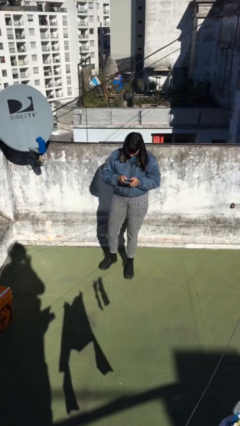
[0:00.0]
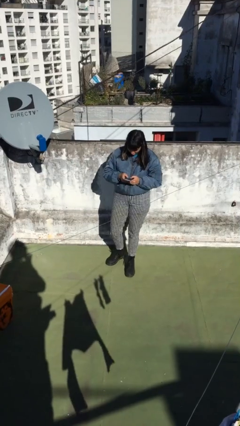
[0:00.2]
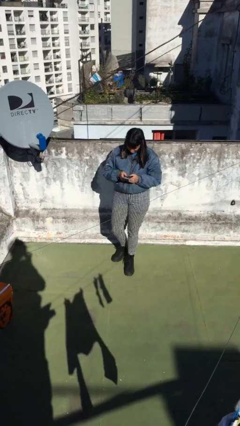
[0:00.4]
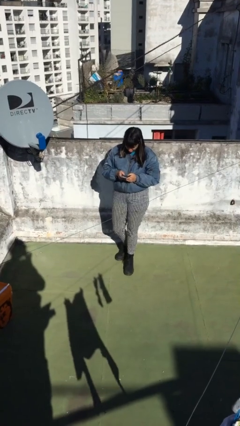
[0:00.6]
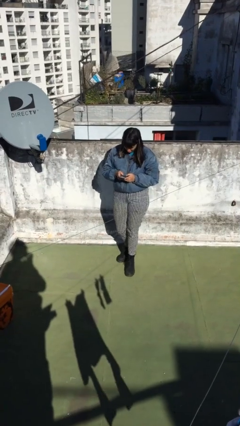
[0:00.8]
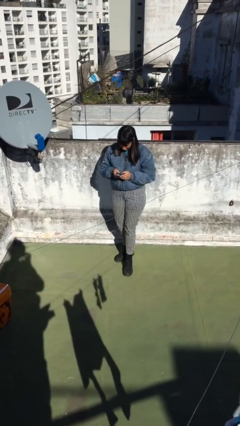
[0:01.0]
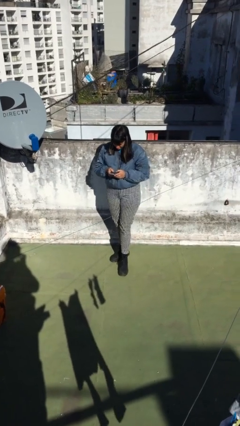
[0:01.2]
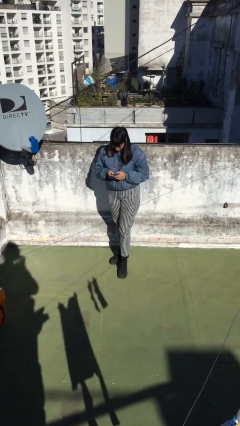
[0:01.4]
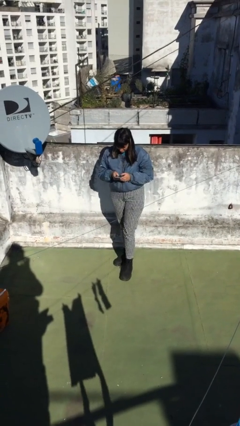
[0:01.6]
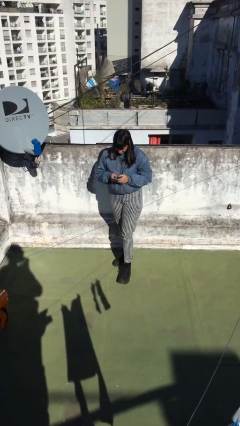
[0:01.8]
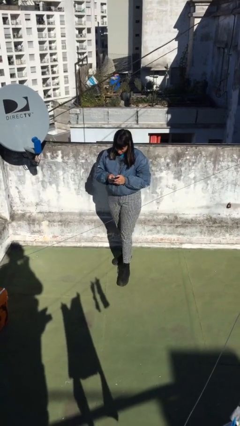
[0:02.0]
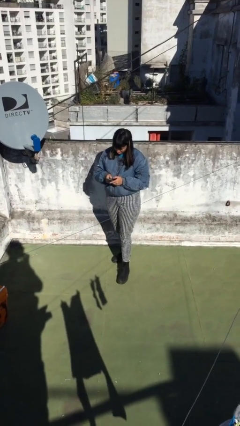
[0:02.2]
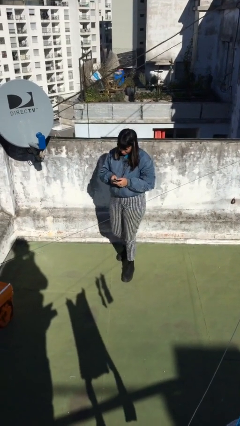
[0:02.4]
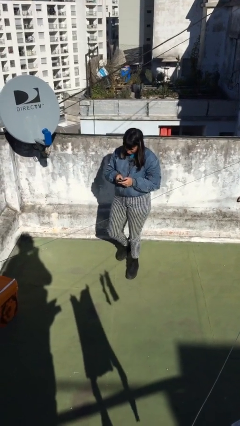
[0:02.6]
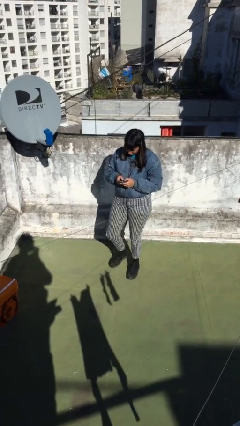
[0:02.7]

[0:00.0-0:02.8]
person texts on phone

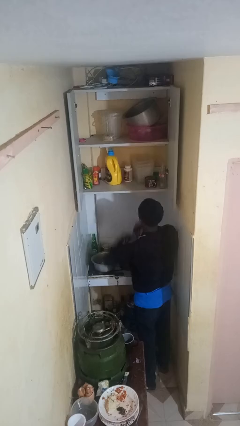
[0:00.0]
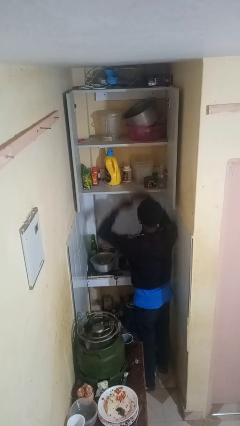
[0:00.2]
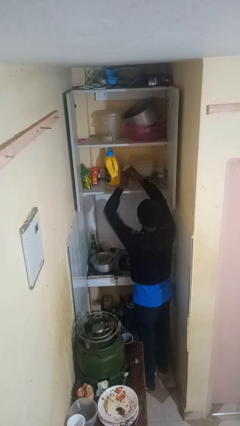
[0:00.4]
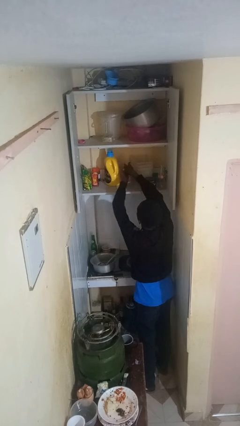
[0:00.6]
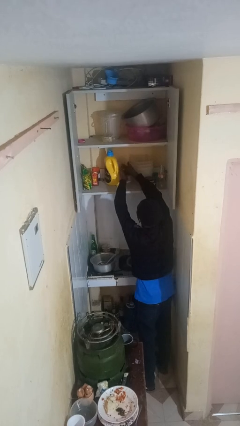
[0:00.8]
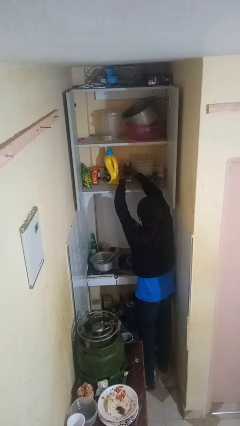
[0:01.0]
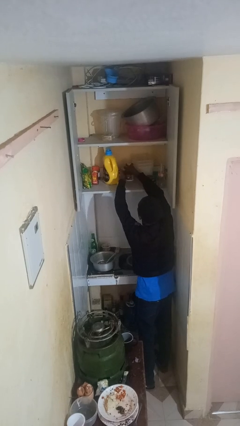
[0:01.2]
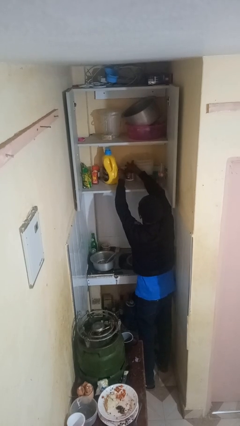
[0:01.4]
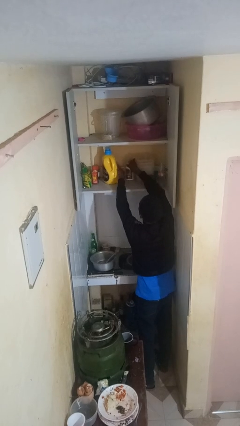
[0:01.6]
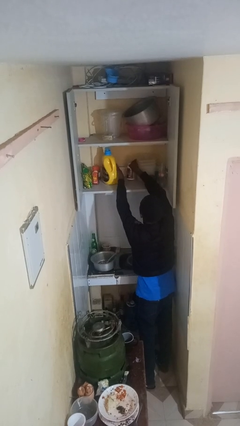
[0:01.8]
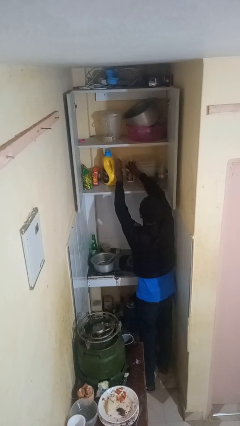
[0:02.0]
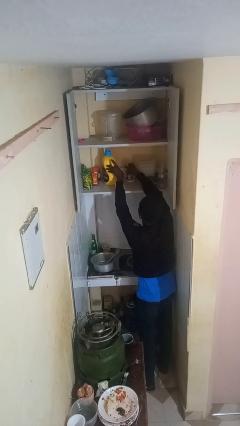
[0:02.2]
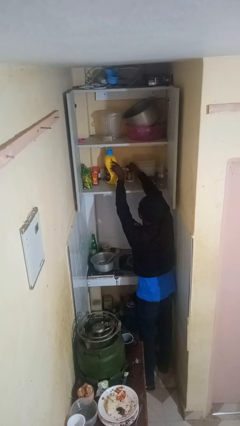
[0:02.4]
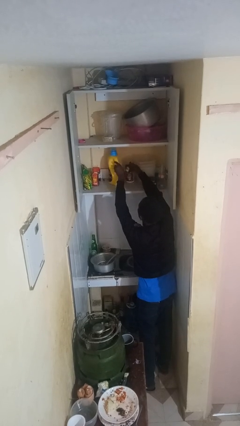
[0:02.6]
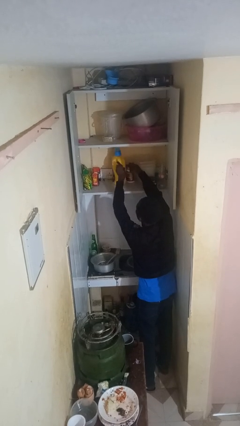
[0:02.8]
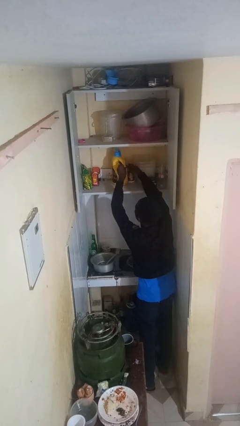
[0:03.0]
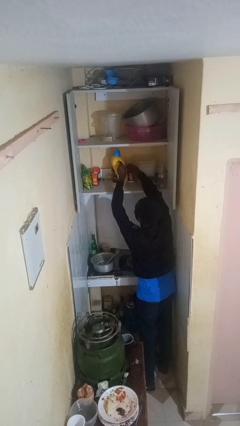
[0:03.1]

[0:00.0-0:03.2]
person searches in kitchen drawer

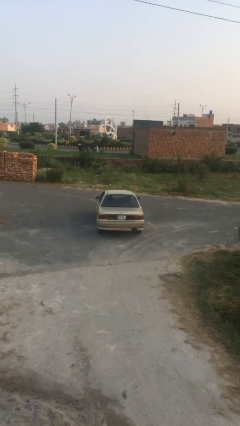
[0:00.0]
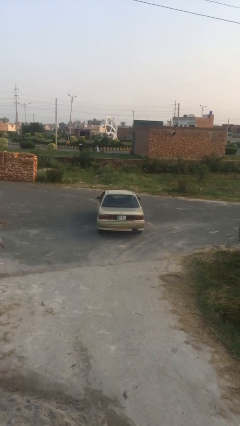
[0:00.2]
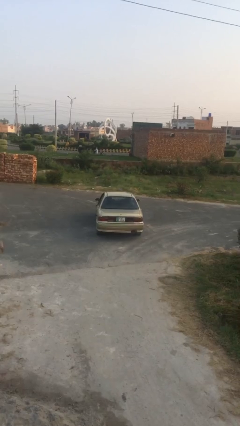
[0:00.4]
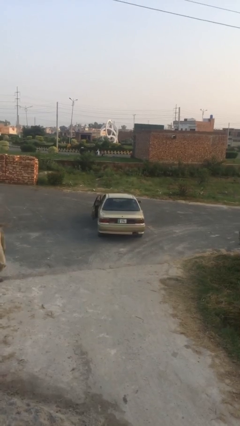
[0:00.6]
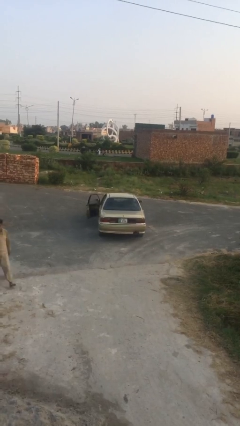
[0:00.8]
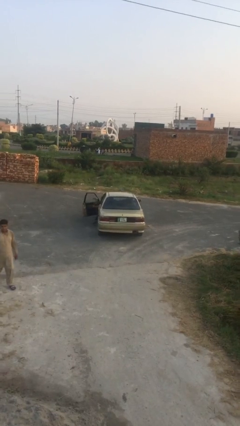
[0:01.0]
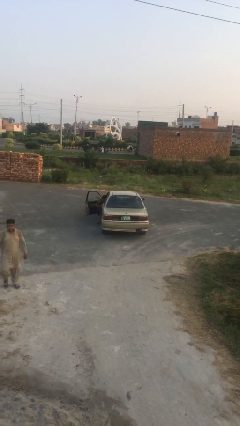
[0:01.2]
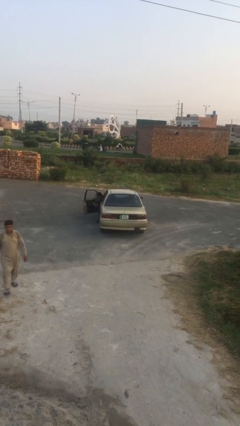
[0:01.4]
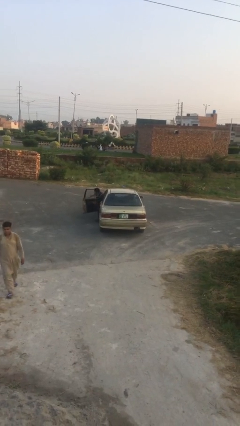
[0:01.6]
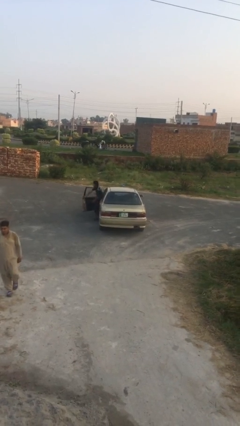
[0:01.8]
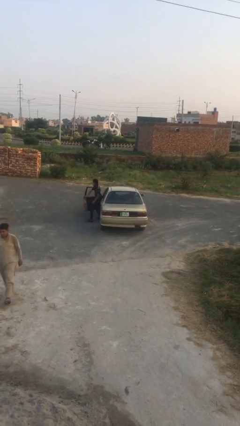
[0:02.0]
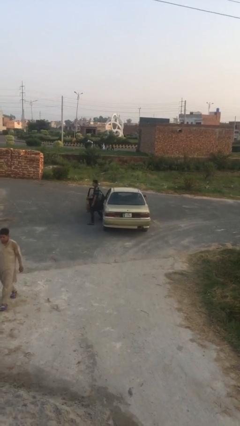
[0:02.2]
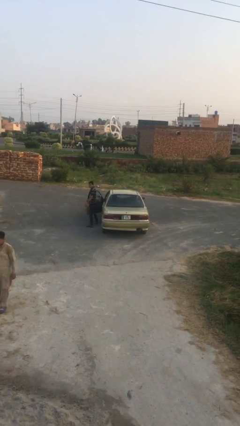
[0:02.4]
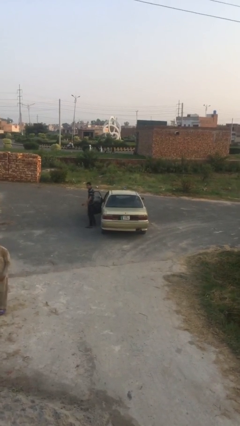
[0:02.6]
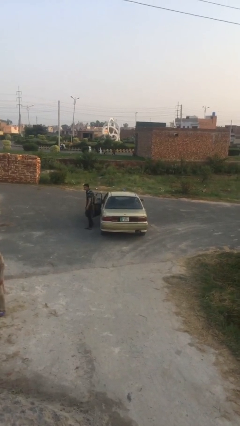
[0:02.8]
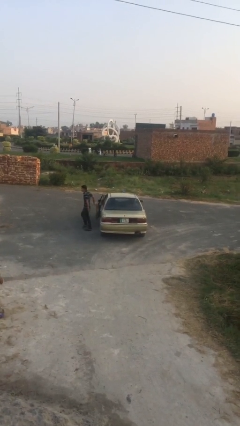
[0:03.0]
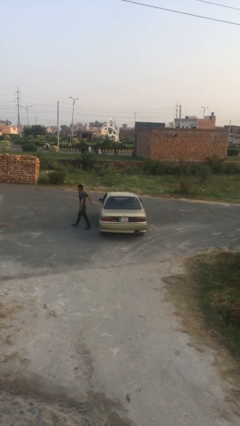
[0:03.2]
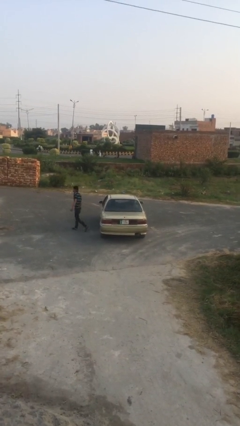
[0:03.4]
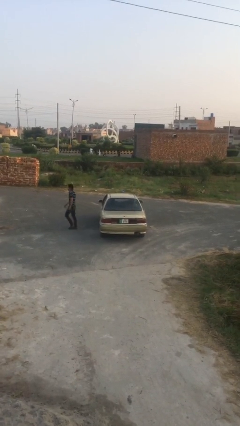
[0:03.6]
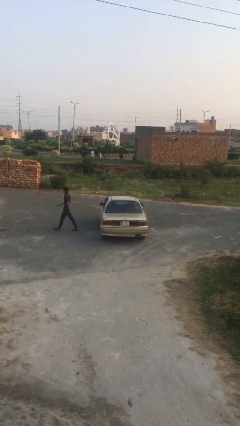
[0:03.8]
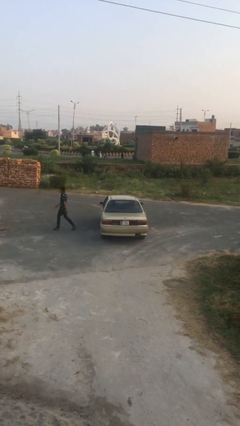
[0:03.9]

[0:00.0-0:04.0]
car drops off person

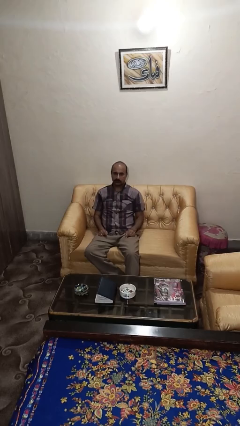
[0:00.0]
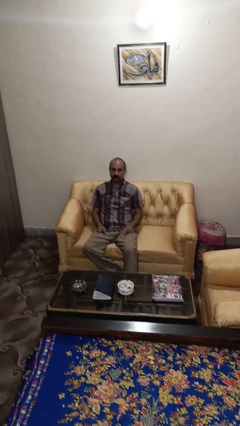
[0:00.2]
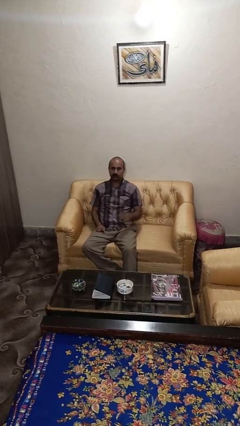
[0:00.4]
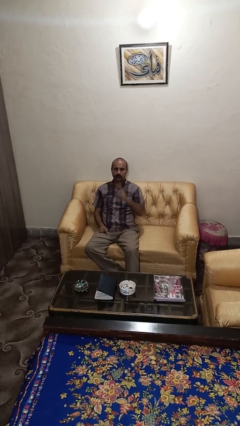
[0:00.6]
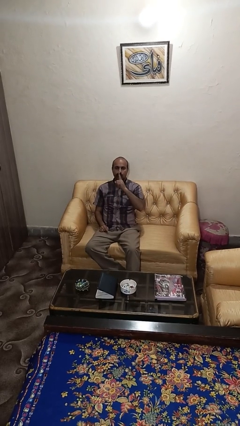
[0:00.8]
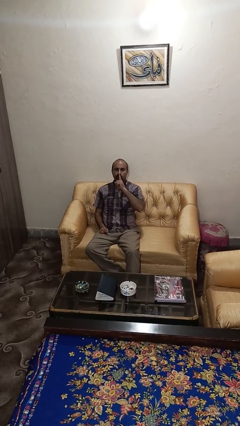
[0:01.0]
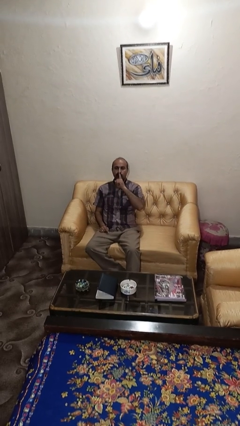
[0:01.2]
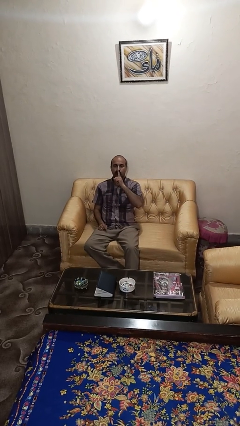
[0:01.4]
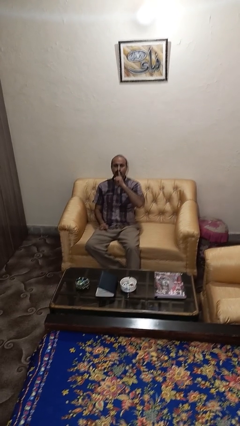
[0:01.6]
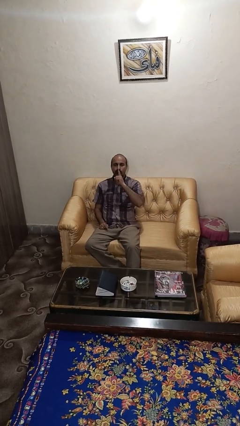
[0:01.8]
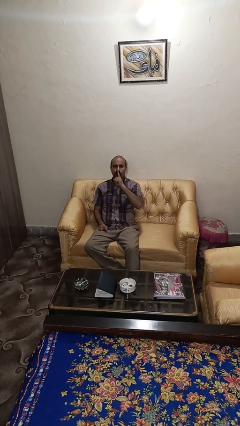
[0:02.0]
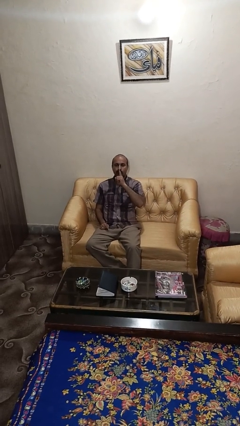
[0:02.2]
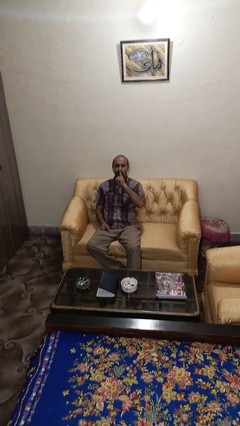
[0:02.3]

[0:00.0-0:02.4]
person gestures be quiet

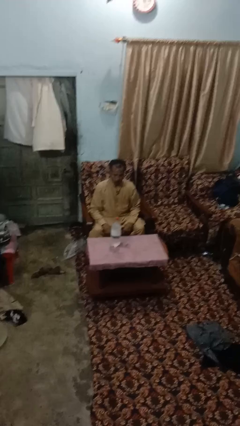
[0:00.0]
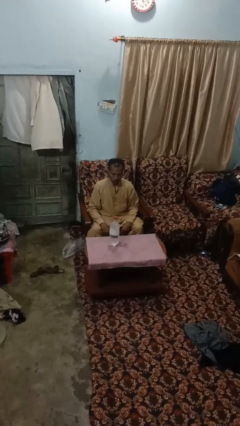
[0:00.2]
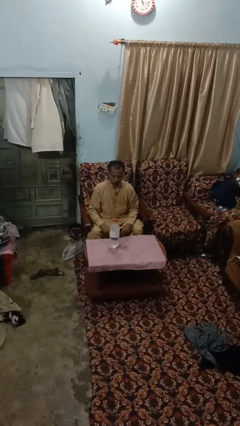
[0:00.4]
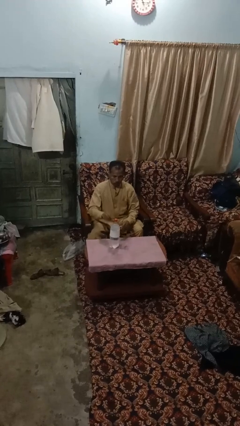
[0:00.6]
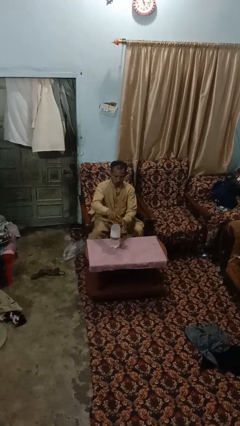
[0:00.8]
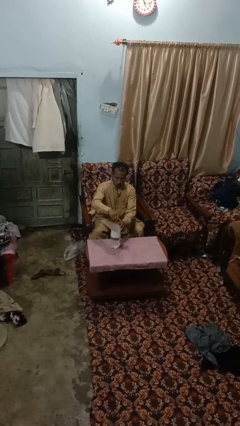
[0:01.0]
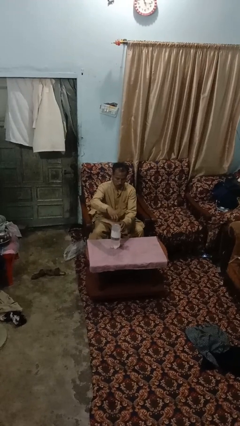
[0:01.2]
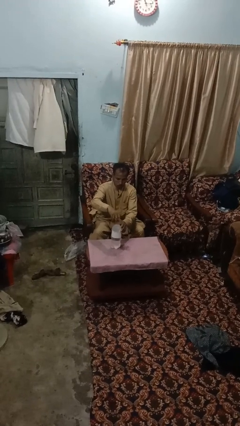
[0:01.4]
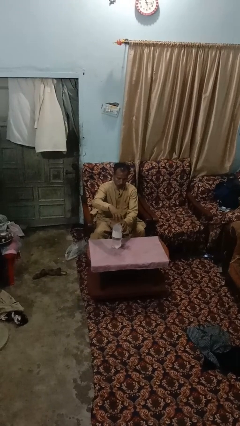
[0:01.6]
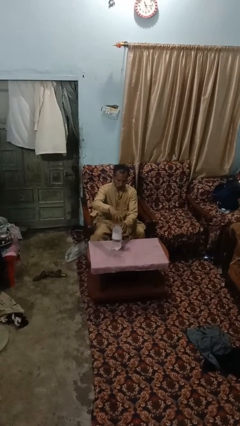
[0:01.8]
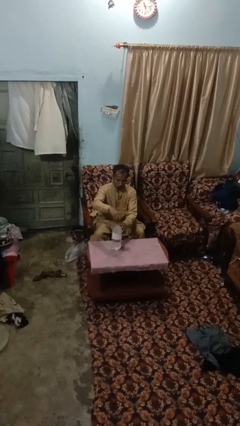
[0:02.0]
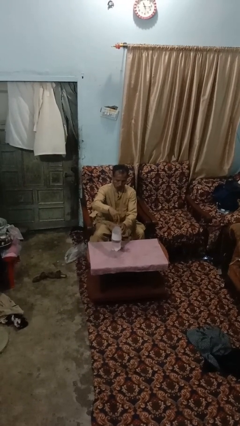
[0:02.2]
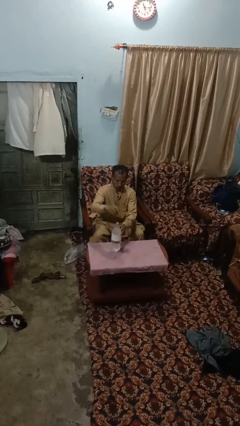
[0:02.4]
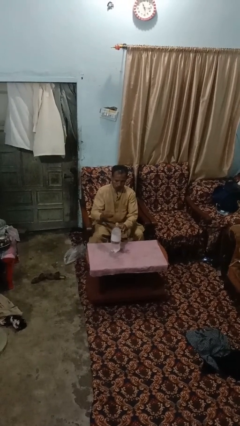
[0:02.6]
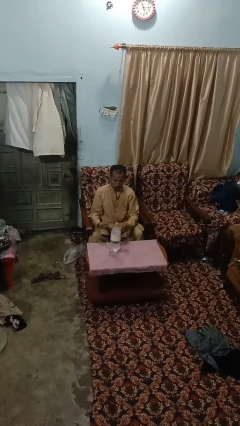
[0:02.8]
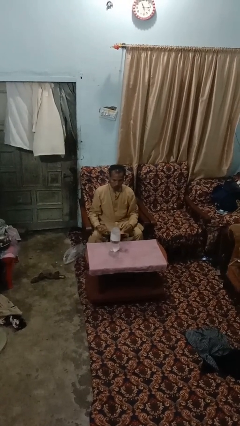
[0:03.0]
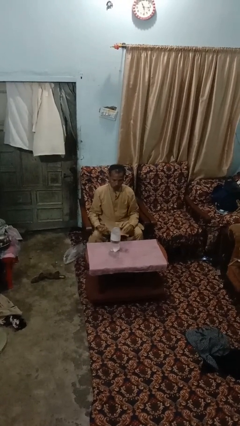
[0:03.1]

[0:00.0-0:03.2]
person unscrews lid from bottle

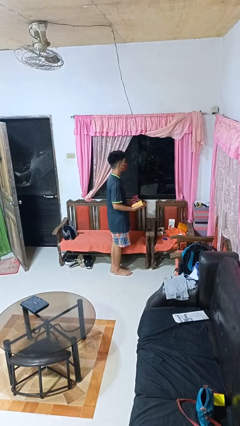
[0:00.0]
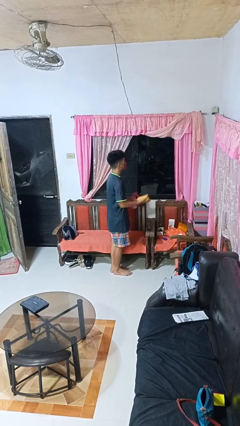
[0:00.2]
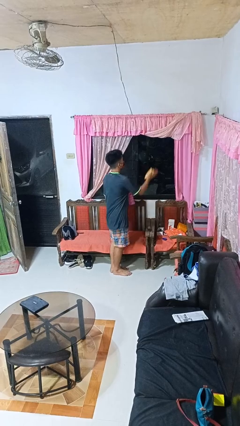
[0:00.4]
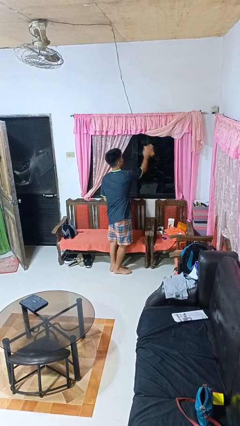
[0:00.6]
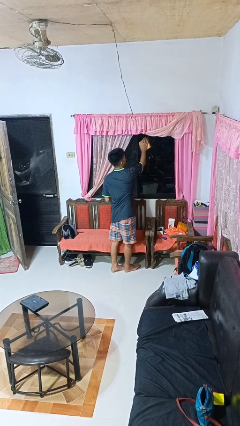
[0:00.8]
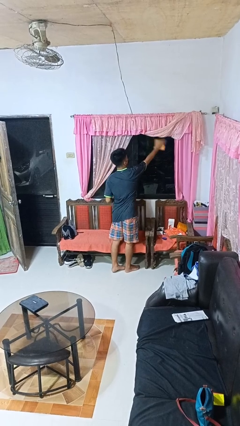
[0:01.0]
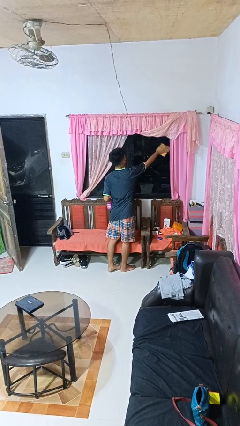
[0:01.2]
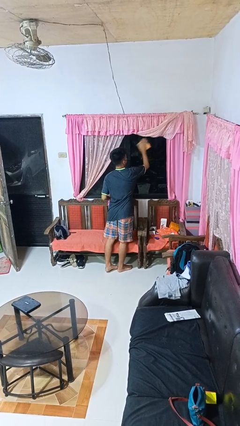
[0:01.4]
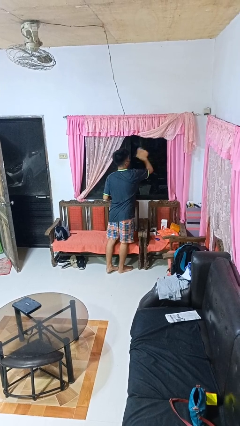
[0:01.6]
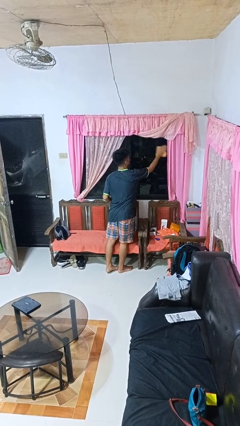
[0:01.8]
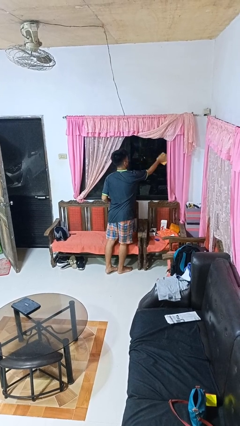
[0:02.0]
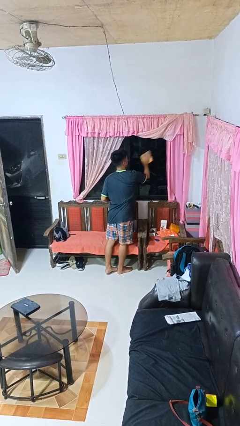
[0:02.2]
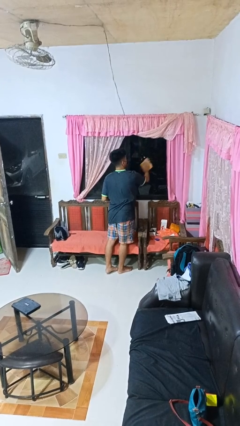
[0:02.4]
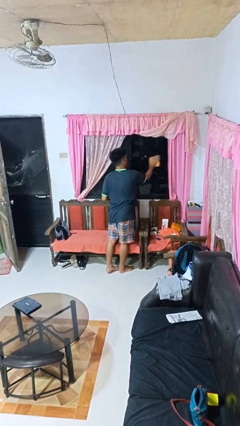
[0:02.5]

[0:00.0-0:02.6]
person washes window
